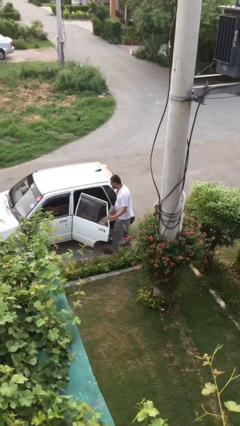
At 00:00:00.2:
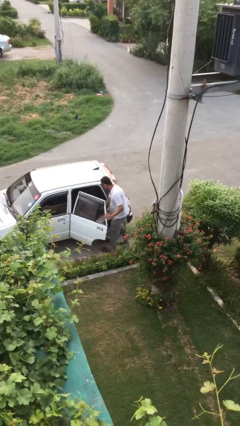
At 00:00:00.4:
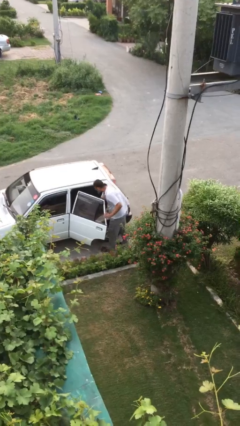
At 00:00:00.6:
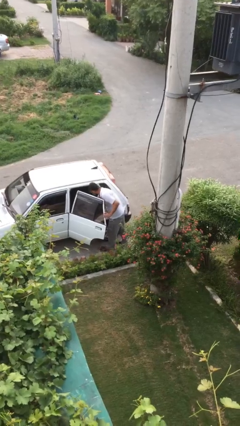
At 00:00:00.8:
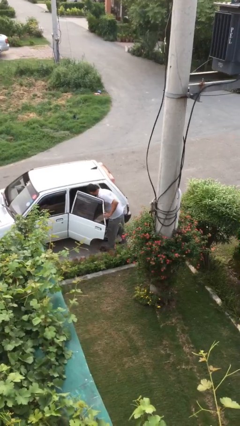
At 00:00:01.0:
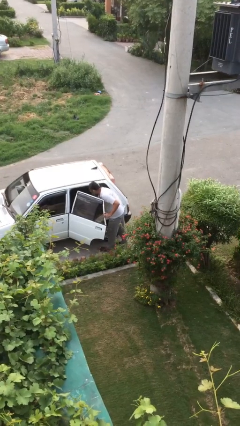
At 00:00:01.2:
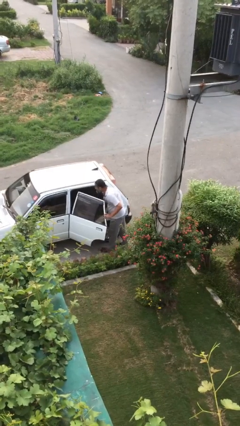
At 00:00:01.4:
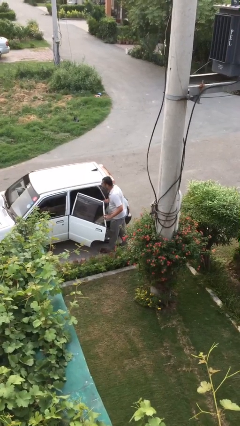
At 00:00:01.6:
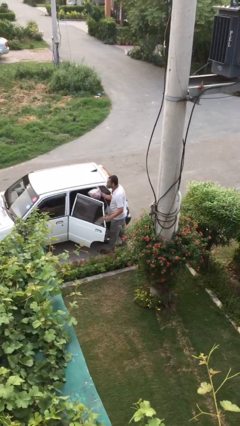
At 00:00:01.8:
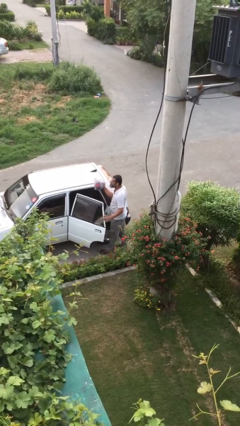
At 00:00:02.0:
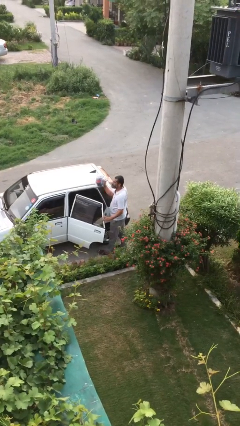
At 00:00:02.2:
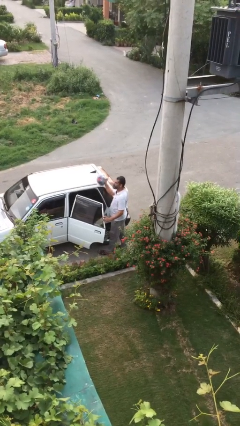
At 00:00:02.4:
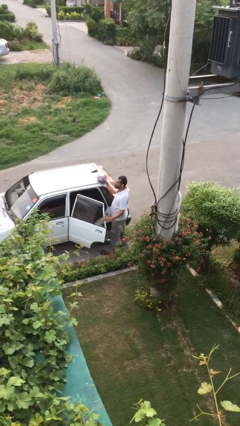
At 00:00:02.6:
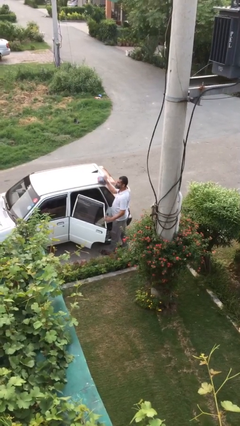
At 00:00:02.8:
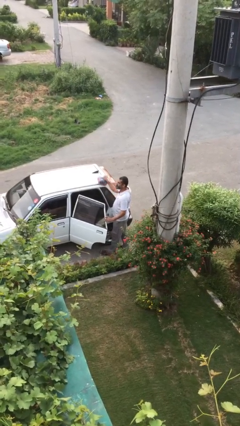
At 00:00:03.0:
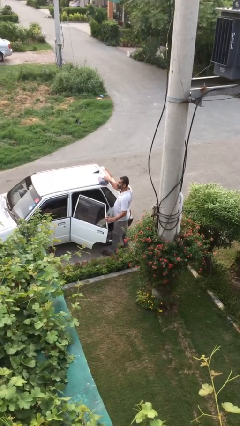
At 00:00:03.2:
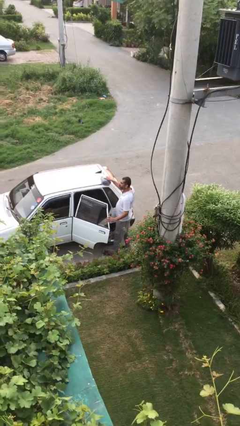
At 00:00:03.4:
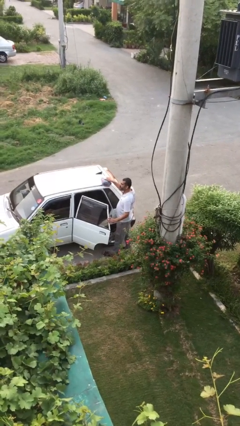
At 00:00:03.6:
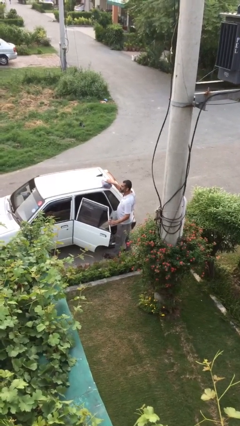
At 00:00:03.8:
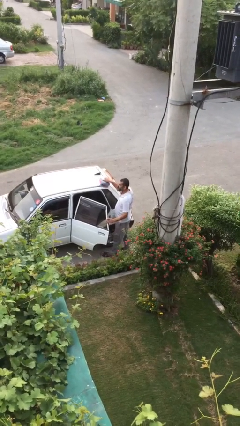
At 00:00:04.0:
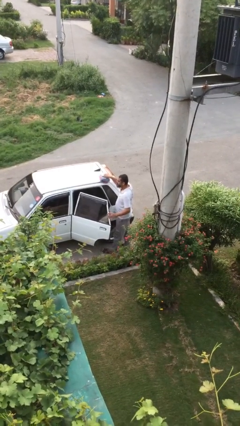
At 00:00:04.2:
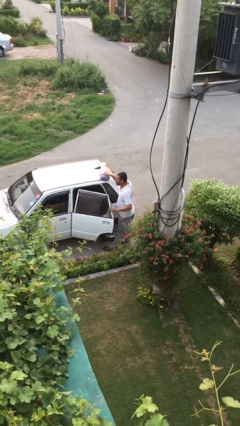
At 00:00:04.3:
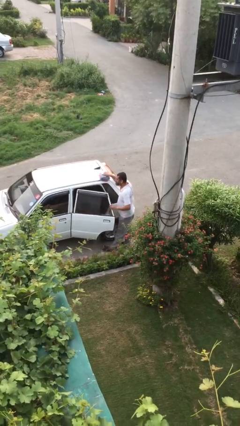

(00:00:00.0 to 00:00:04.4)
person unloads car

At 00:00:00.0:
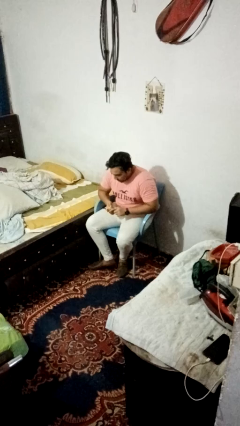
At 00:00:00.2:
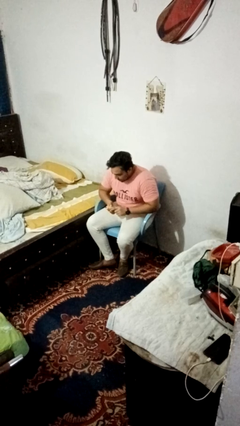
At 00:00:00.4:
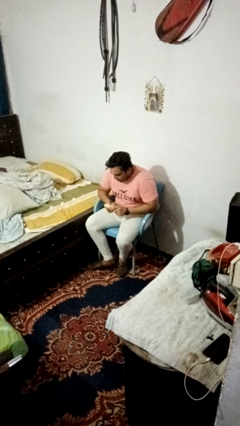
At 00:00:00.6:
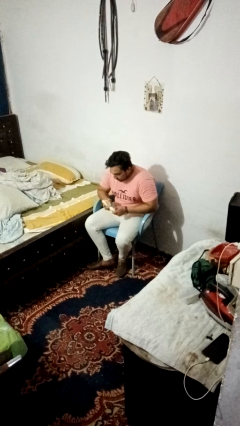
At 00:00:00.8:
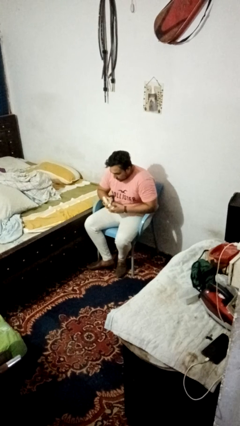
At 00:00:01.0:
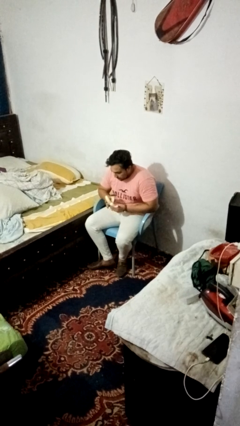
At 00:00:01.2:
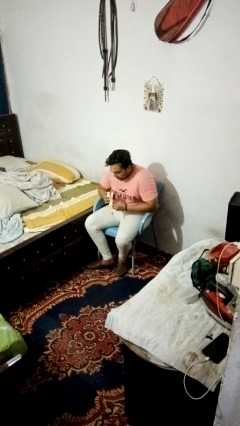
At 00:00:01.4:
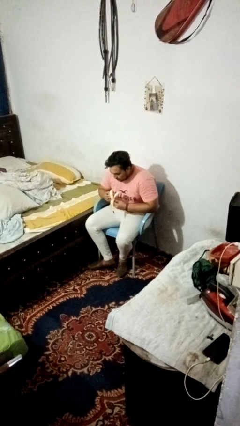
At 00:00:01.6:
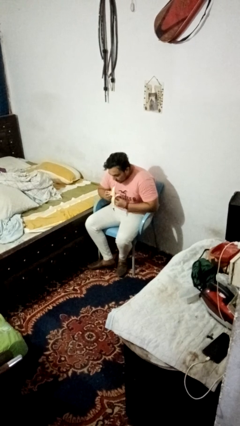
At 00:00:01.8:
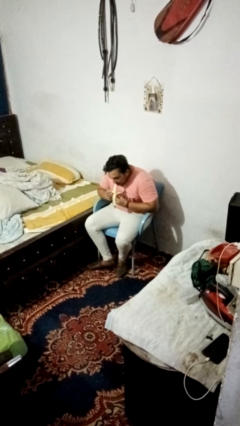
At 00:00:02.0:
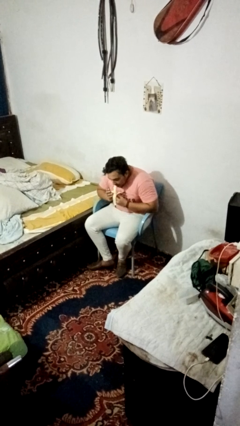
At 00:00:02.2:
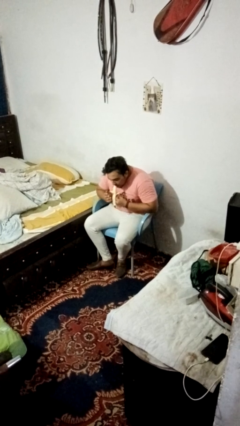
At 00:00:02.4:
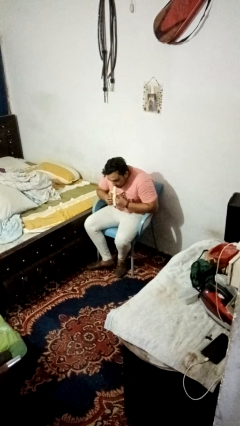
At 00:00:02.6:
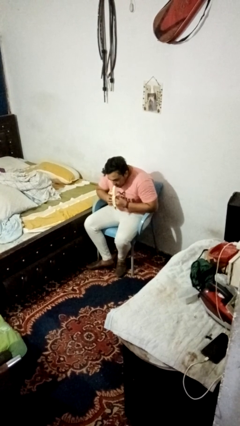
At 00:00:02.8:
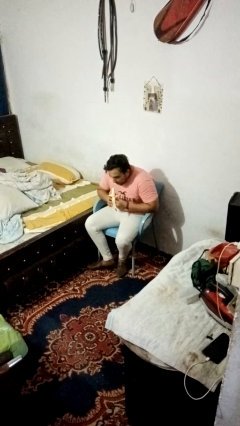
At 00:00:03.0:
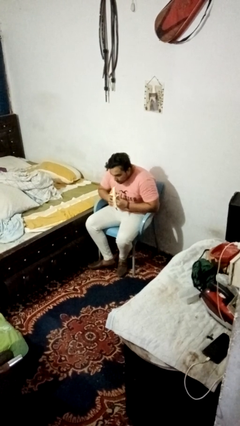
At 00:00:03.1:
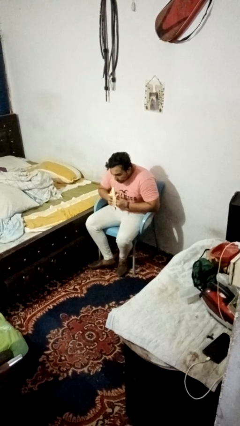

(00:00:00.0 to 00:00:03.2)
person eats banana

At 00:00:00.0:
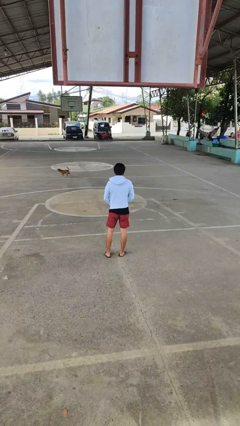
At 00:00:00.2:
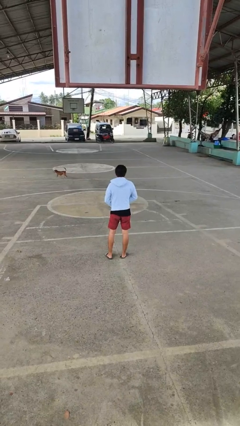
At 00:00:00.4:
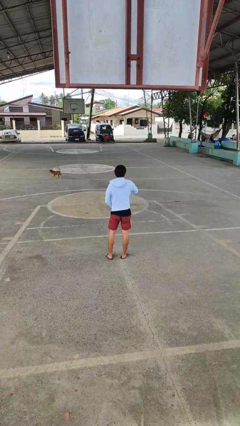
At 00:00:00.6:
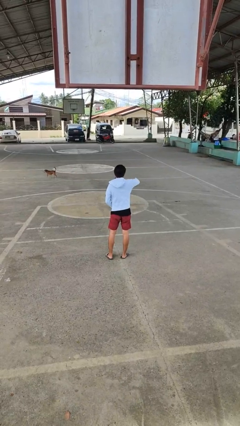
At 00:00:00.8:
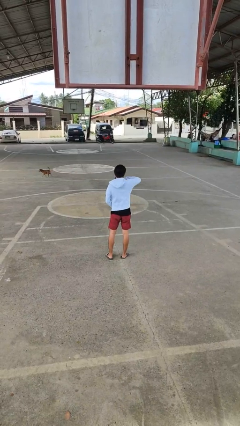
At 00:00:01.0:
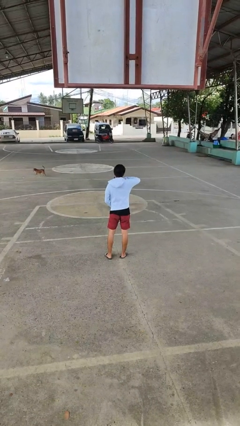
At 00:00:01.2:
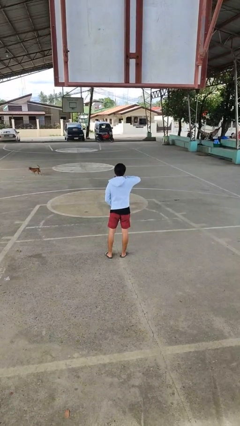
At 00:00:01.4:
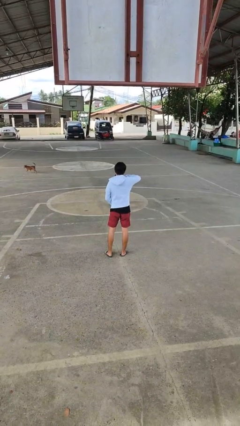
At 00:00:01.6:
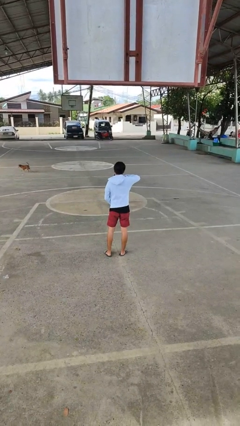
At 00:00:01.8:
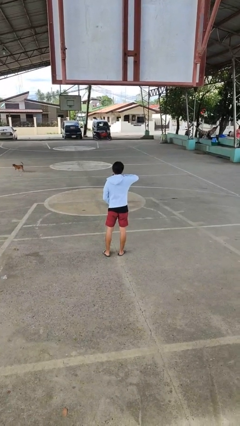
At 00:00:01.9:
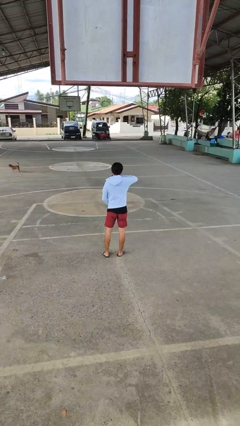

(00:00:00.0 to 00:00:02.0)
person zips up jacket

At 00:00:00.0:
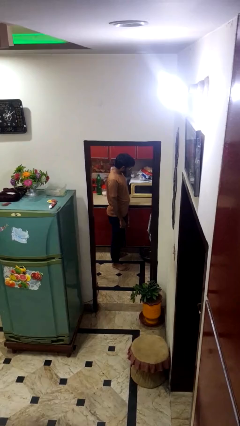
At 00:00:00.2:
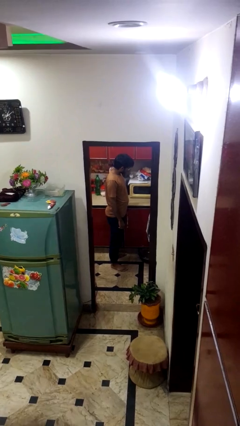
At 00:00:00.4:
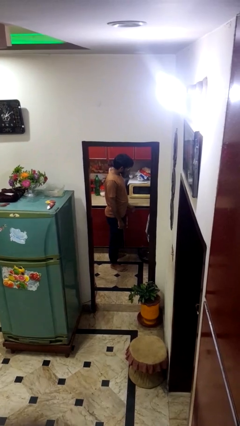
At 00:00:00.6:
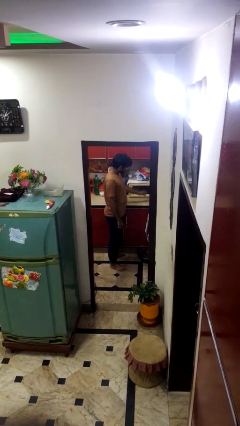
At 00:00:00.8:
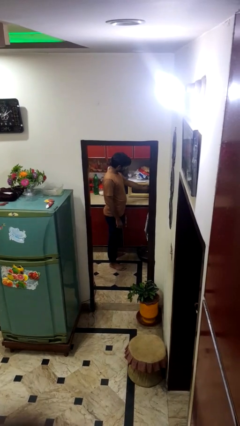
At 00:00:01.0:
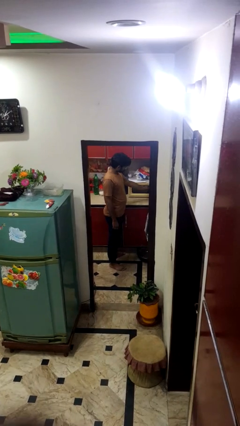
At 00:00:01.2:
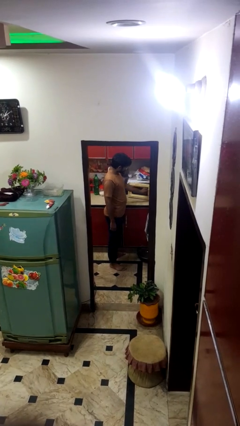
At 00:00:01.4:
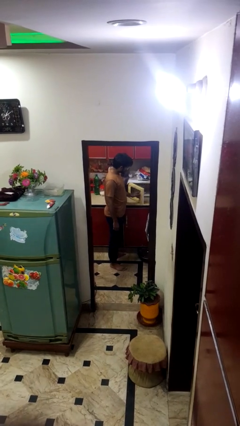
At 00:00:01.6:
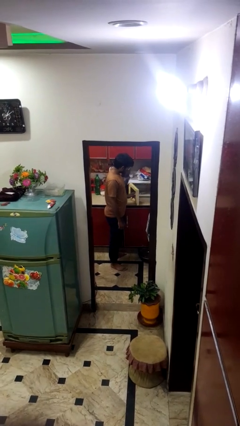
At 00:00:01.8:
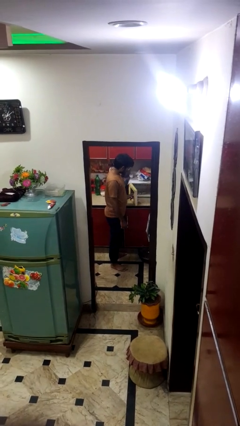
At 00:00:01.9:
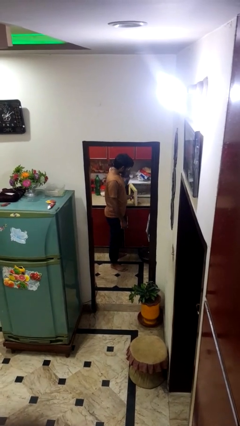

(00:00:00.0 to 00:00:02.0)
person opens microwave

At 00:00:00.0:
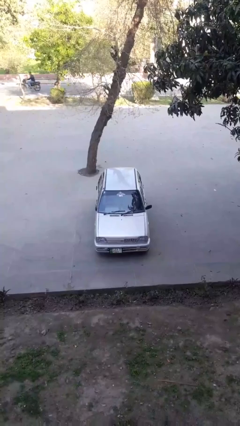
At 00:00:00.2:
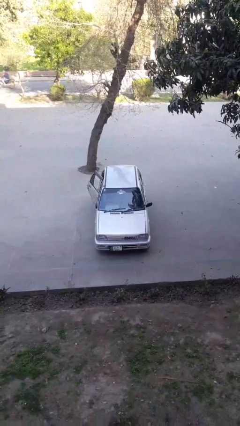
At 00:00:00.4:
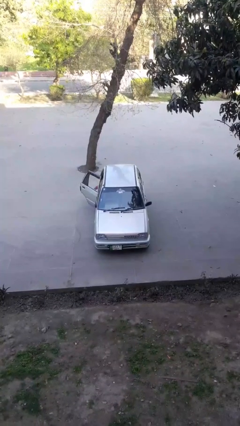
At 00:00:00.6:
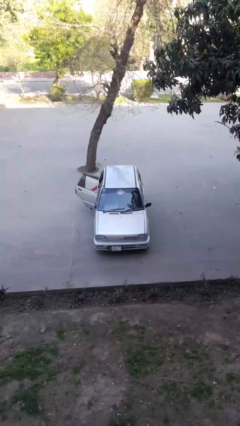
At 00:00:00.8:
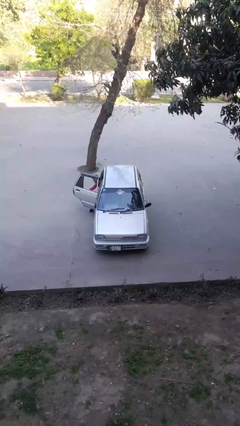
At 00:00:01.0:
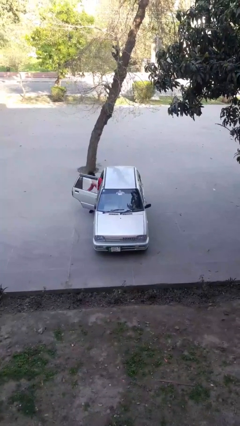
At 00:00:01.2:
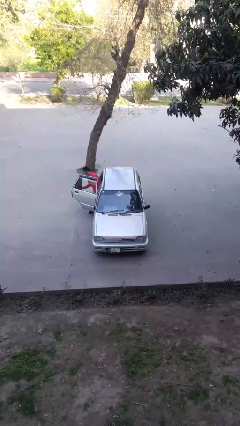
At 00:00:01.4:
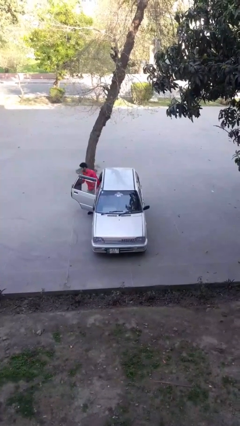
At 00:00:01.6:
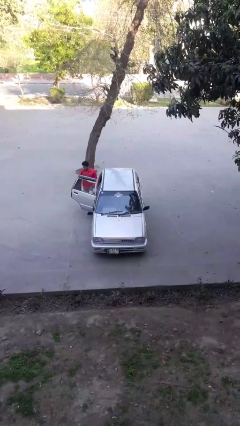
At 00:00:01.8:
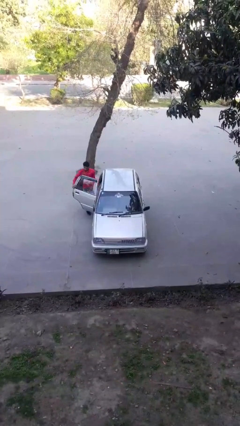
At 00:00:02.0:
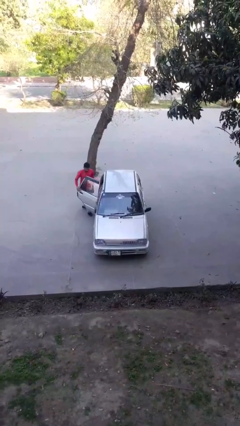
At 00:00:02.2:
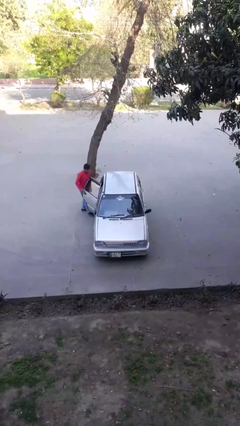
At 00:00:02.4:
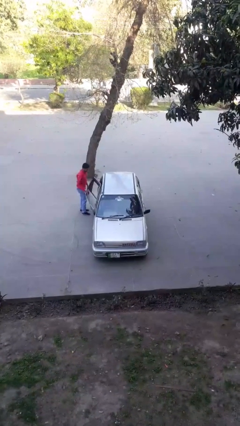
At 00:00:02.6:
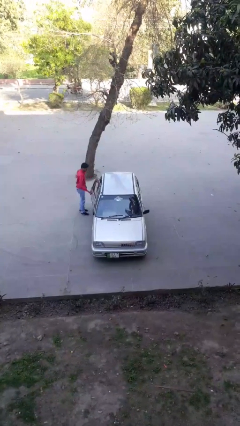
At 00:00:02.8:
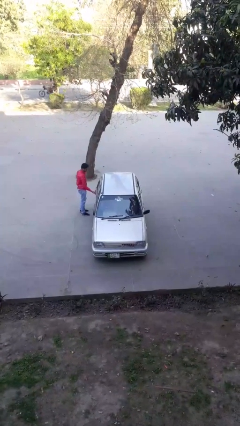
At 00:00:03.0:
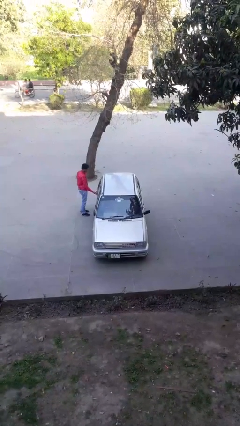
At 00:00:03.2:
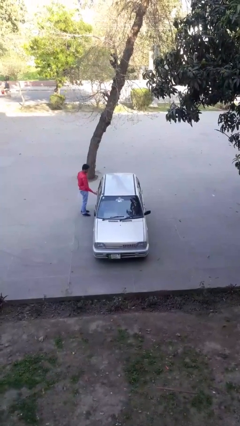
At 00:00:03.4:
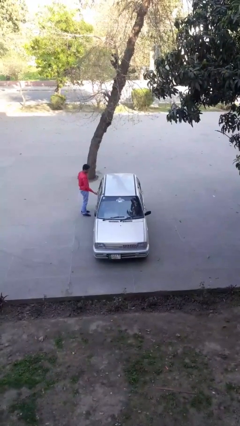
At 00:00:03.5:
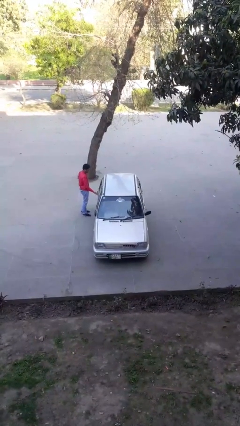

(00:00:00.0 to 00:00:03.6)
car drops off person

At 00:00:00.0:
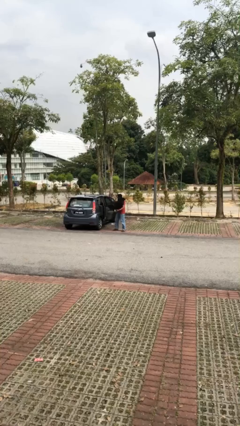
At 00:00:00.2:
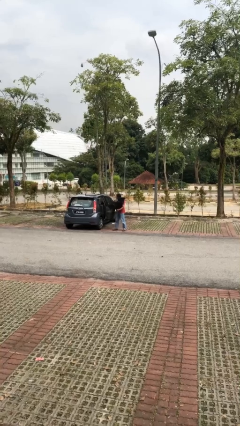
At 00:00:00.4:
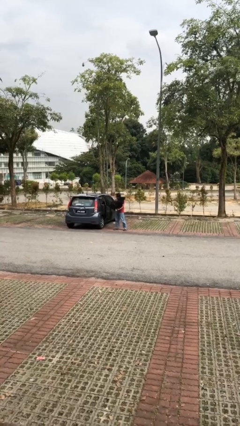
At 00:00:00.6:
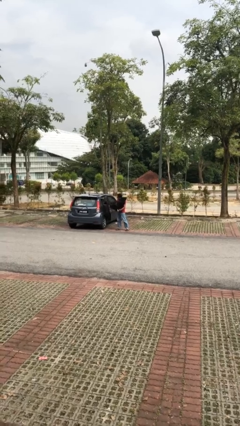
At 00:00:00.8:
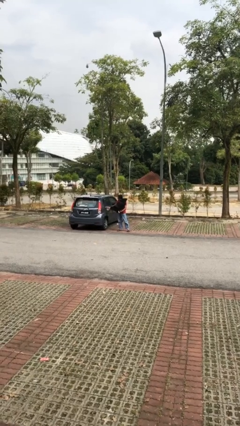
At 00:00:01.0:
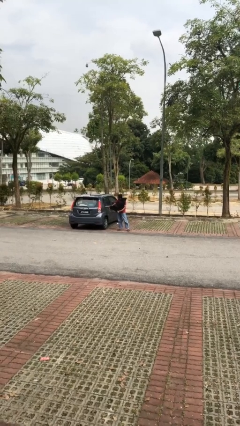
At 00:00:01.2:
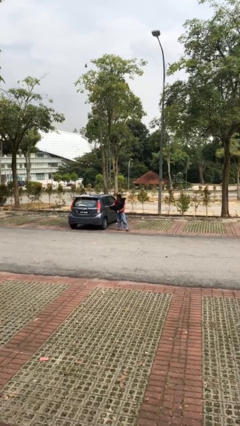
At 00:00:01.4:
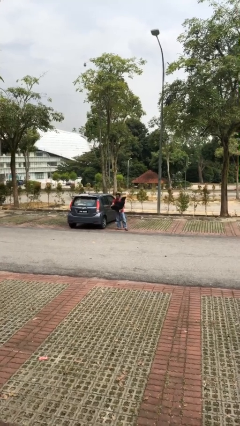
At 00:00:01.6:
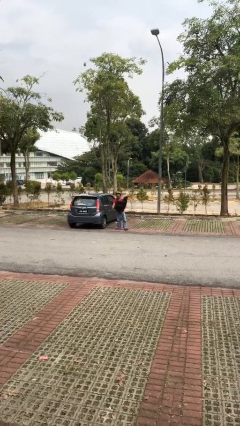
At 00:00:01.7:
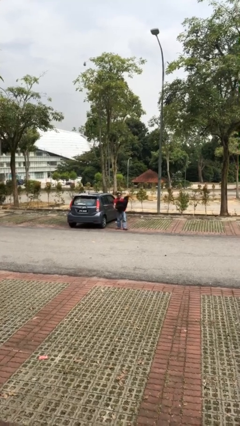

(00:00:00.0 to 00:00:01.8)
person closes car door
